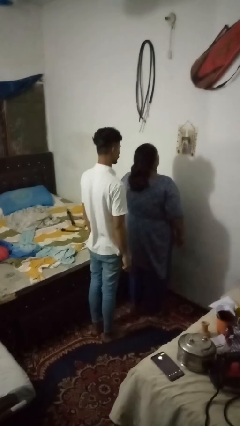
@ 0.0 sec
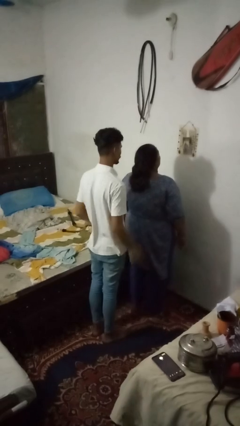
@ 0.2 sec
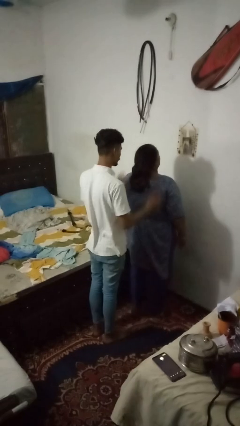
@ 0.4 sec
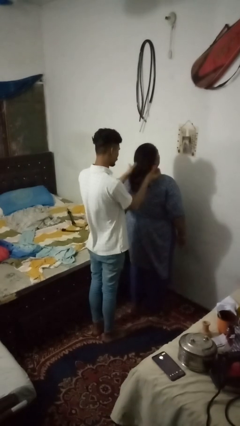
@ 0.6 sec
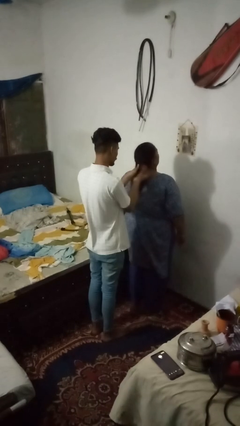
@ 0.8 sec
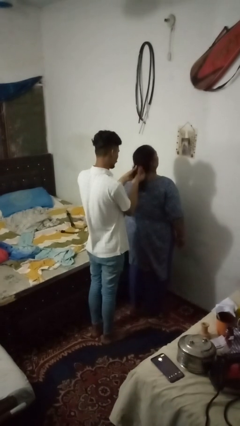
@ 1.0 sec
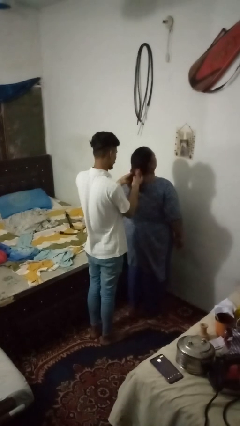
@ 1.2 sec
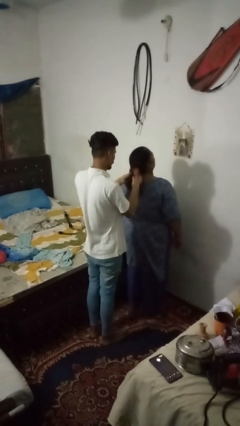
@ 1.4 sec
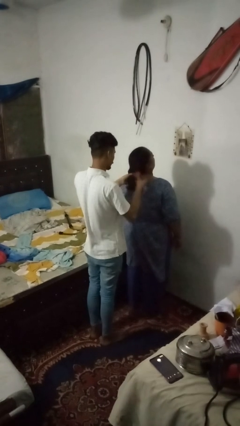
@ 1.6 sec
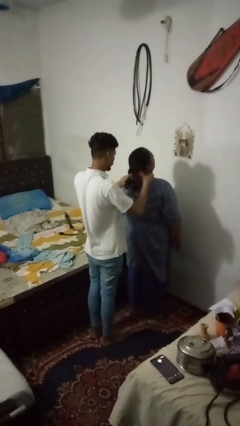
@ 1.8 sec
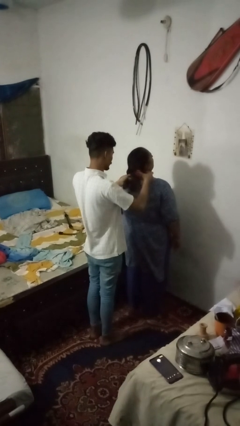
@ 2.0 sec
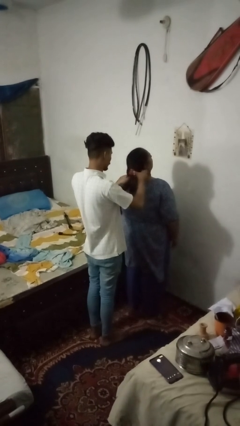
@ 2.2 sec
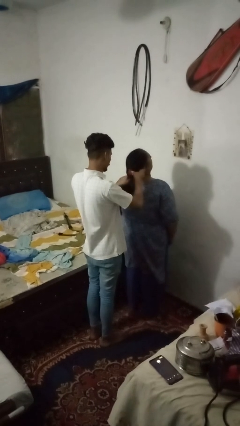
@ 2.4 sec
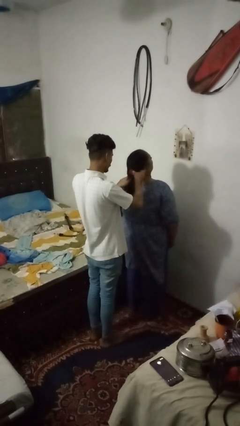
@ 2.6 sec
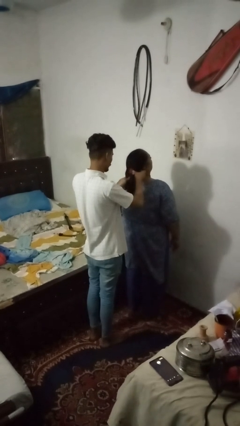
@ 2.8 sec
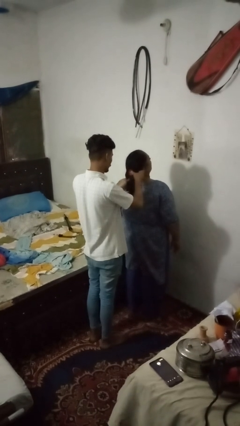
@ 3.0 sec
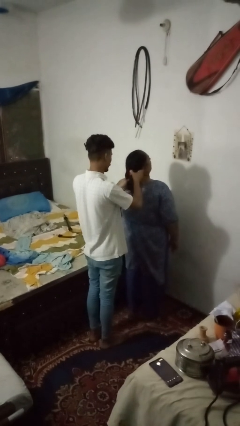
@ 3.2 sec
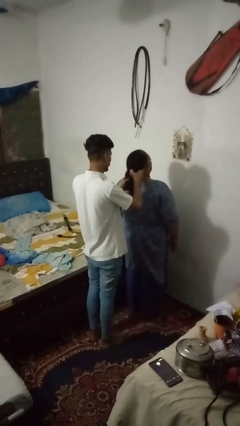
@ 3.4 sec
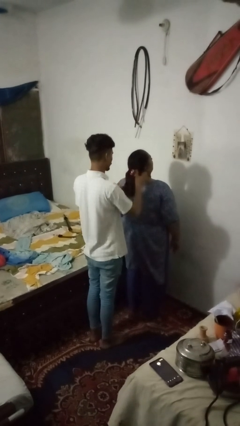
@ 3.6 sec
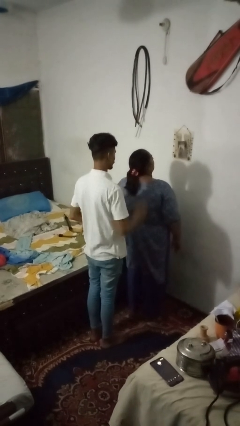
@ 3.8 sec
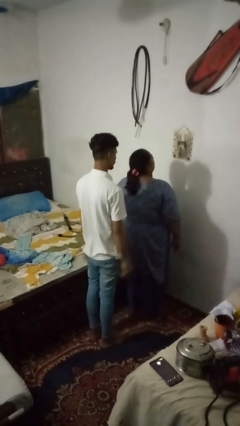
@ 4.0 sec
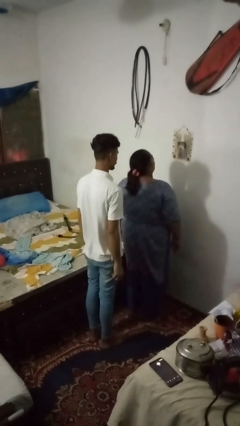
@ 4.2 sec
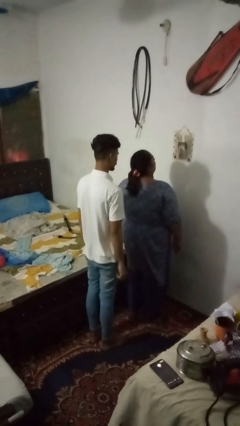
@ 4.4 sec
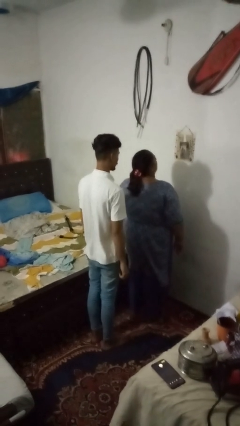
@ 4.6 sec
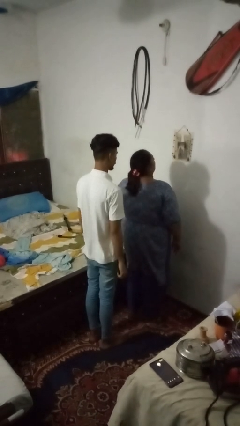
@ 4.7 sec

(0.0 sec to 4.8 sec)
person braids hair of person

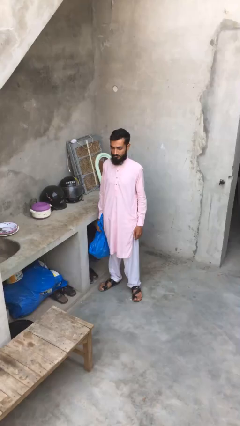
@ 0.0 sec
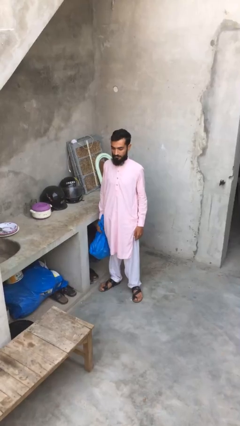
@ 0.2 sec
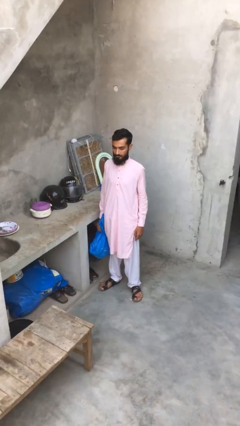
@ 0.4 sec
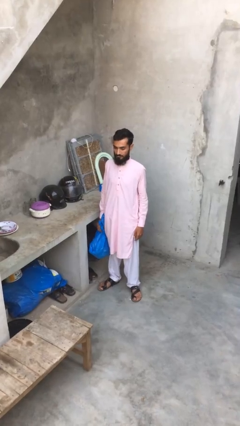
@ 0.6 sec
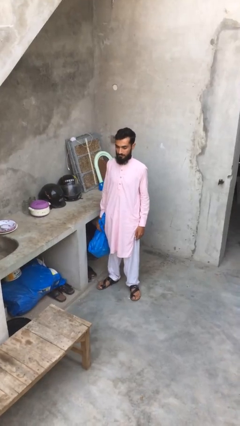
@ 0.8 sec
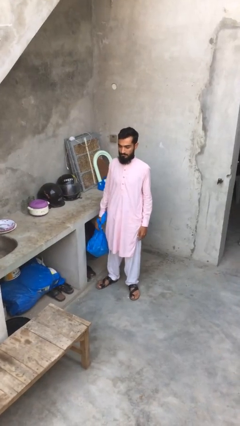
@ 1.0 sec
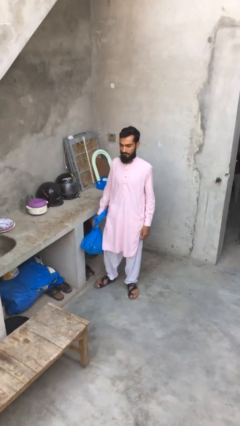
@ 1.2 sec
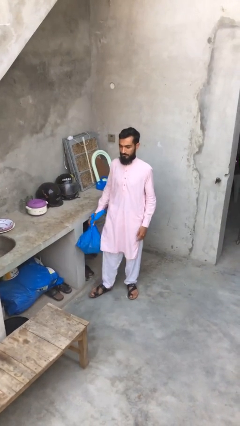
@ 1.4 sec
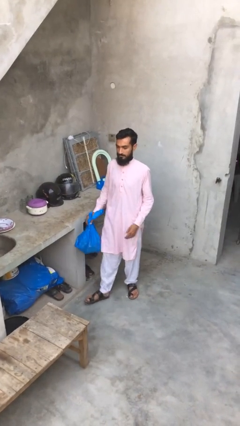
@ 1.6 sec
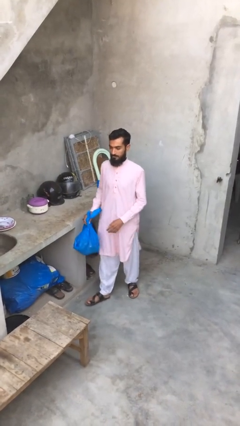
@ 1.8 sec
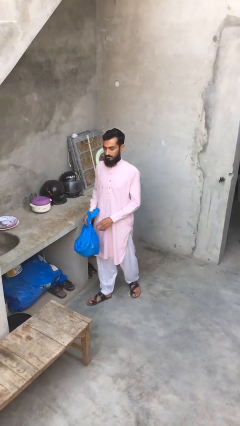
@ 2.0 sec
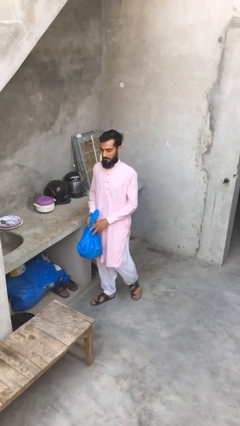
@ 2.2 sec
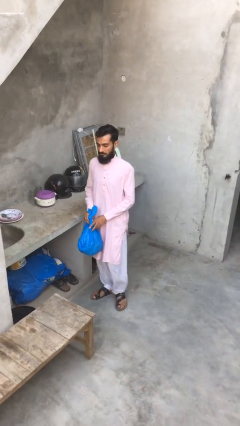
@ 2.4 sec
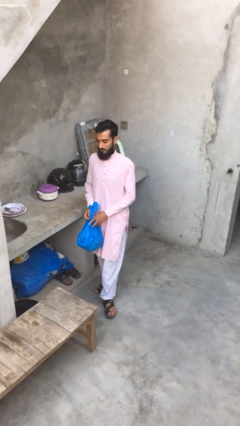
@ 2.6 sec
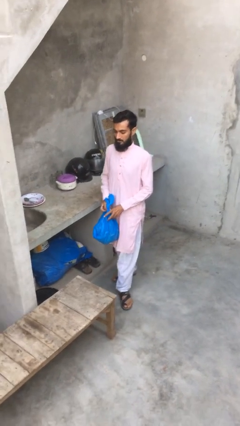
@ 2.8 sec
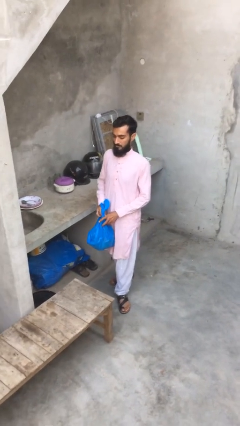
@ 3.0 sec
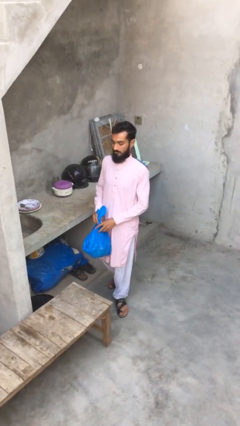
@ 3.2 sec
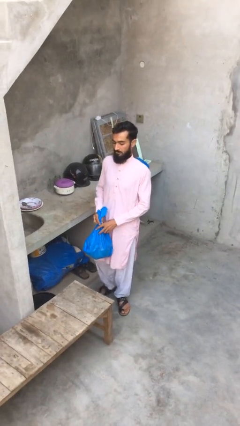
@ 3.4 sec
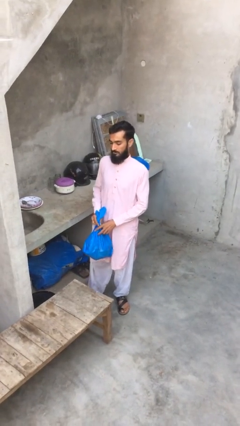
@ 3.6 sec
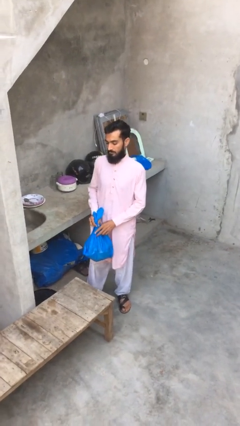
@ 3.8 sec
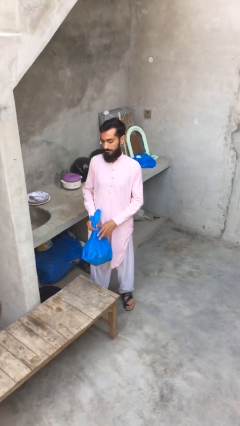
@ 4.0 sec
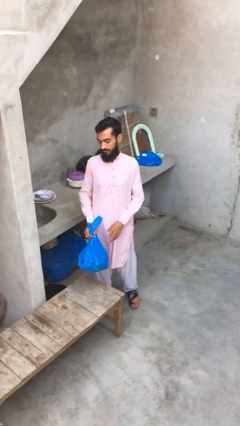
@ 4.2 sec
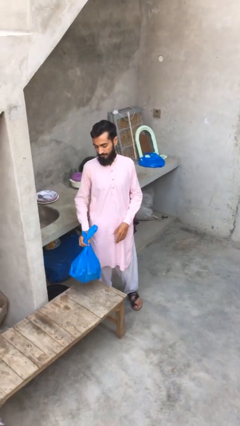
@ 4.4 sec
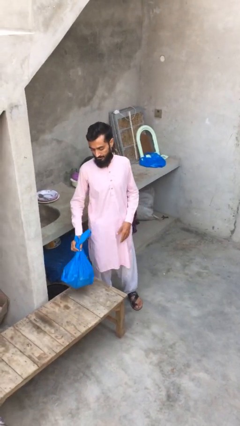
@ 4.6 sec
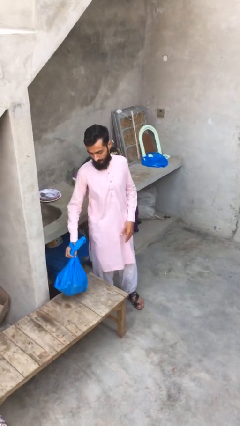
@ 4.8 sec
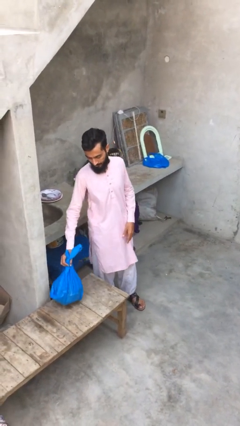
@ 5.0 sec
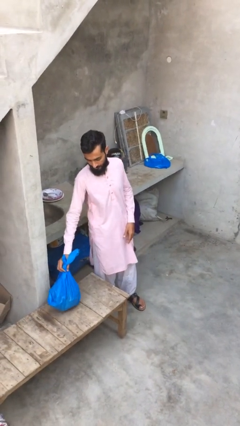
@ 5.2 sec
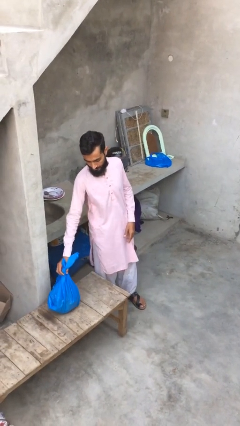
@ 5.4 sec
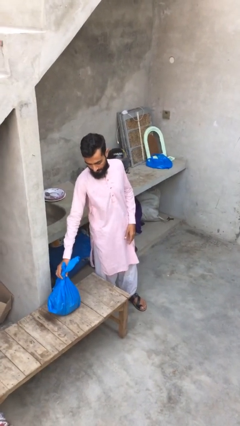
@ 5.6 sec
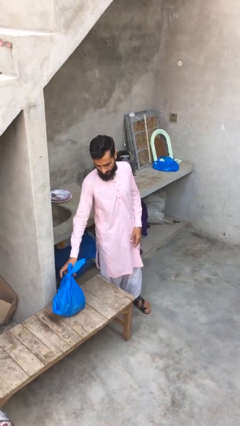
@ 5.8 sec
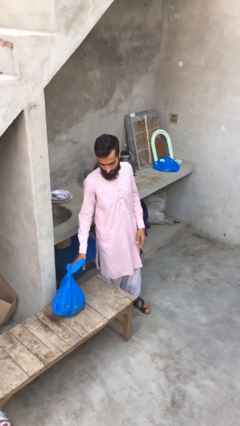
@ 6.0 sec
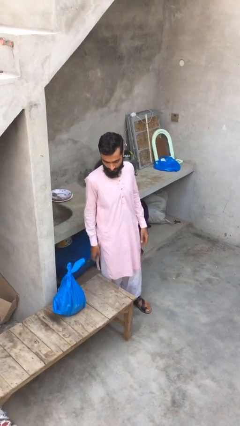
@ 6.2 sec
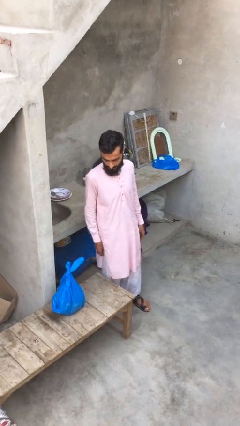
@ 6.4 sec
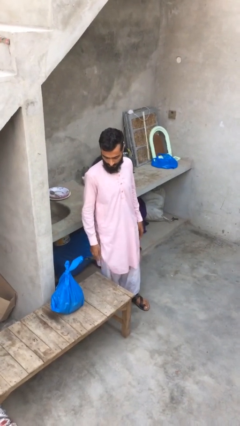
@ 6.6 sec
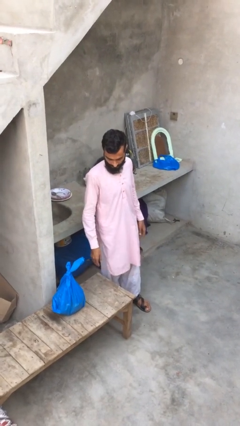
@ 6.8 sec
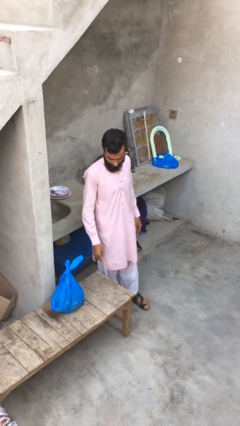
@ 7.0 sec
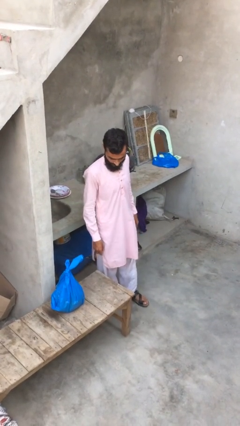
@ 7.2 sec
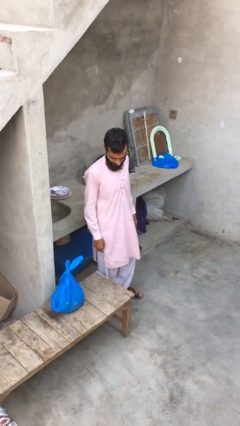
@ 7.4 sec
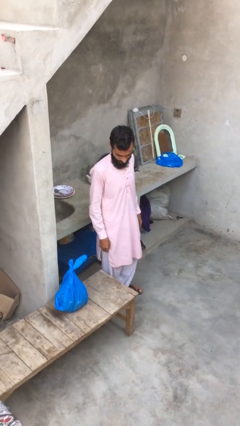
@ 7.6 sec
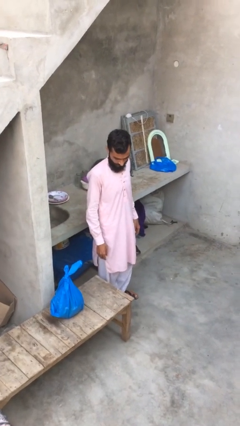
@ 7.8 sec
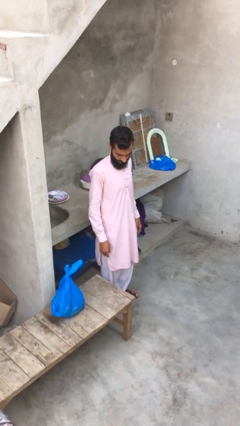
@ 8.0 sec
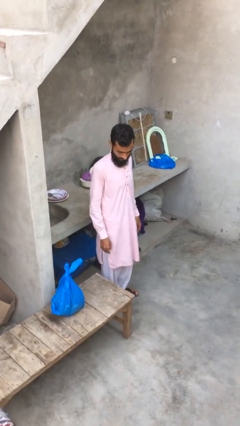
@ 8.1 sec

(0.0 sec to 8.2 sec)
person puts down object on table

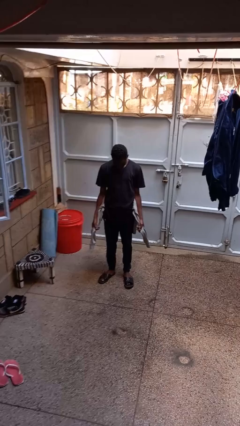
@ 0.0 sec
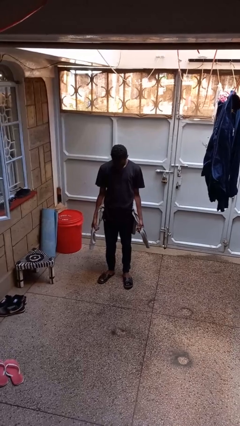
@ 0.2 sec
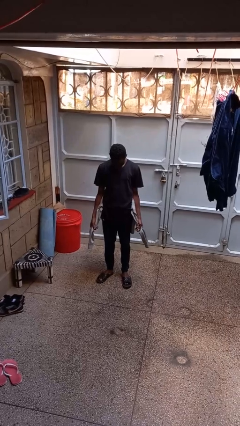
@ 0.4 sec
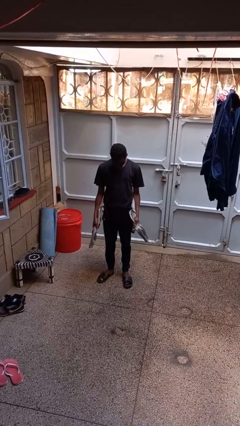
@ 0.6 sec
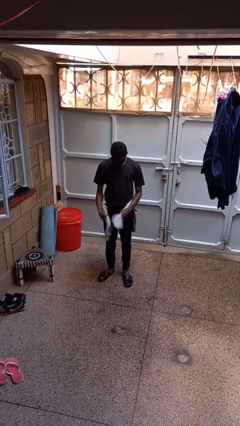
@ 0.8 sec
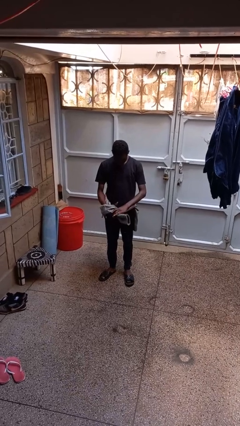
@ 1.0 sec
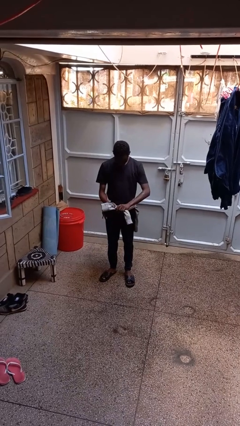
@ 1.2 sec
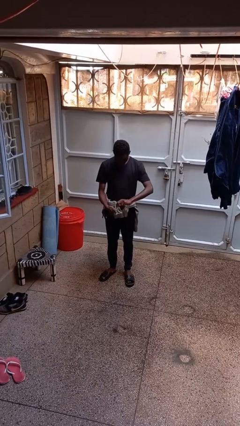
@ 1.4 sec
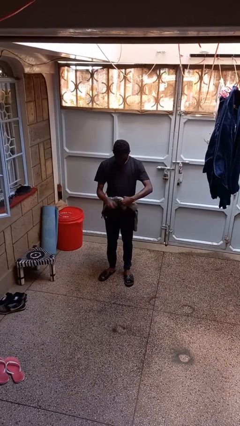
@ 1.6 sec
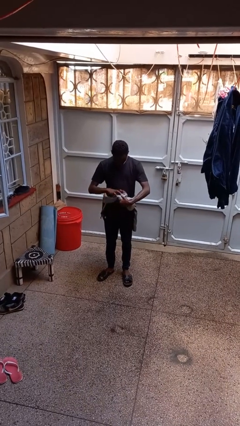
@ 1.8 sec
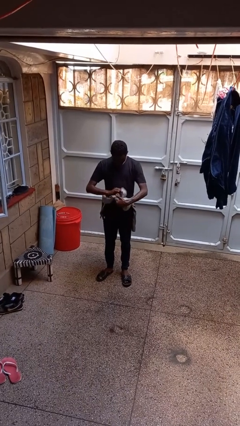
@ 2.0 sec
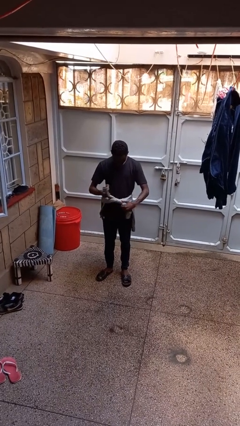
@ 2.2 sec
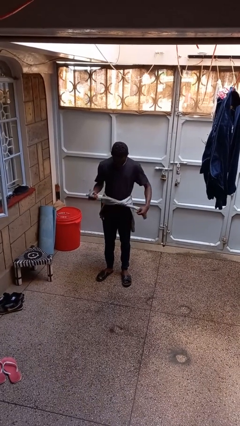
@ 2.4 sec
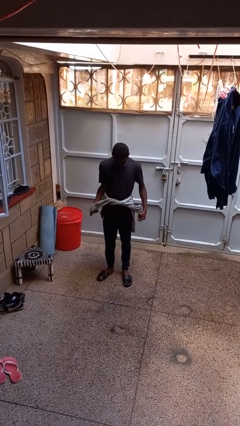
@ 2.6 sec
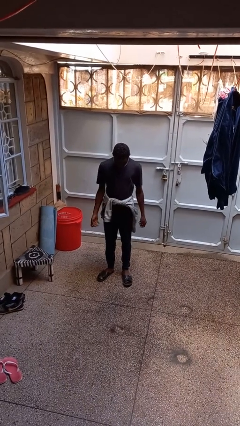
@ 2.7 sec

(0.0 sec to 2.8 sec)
person ties jacket around waist

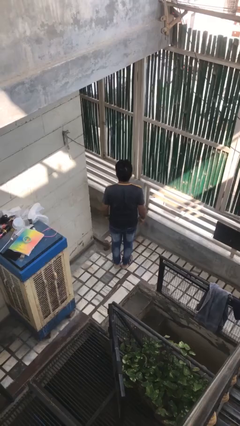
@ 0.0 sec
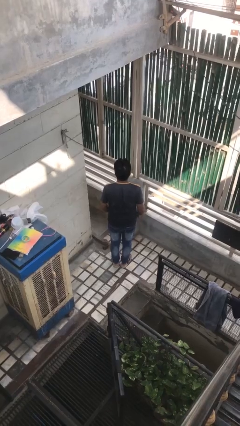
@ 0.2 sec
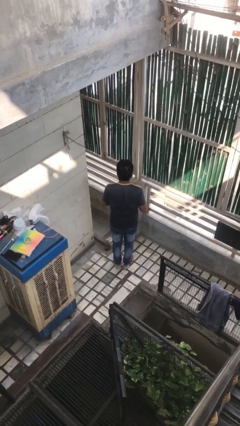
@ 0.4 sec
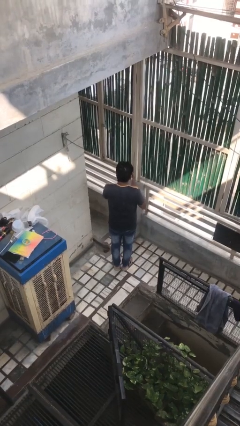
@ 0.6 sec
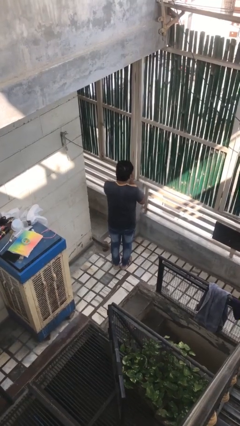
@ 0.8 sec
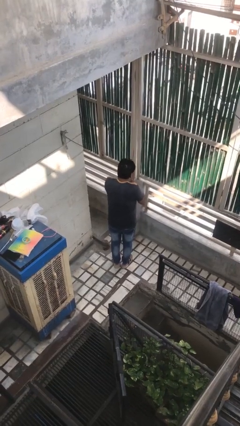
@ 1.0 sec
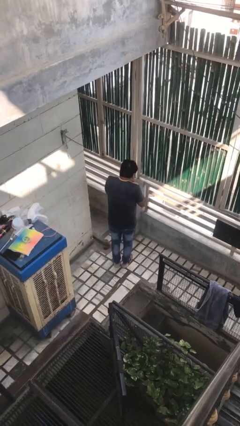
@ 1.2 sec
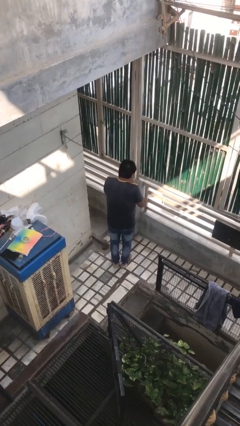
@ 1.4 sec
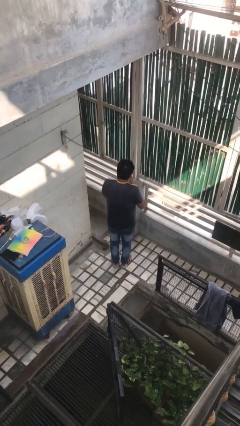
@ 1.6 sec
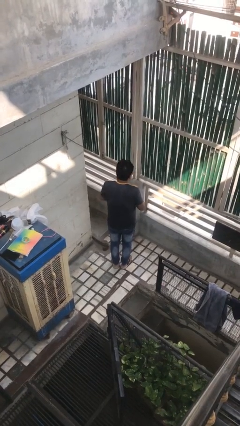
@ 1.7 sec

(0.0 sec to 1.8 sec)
person sneezes into hand

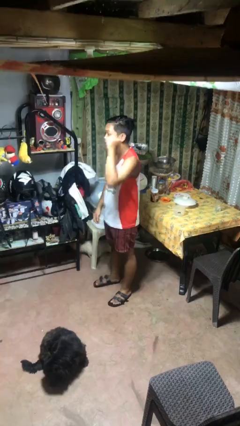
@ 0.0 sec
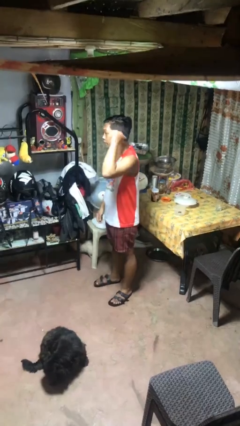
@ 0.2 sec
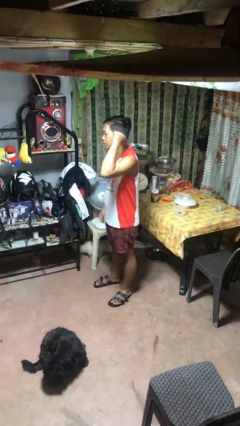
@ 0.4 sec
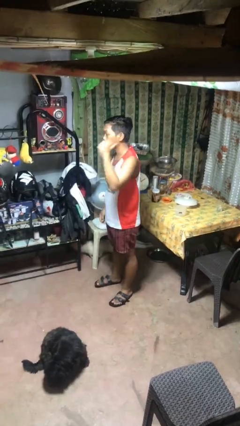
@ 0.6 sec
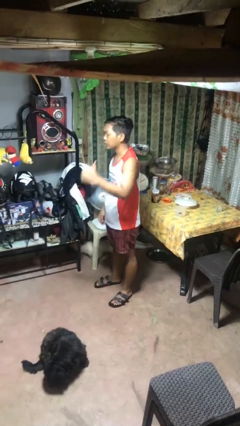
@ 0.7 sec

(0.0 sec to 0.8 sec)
person gestures behind me
